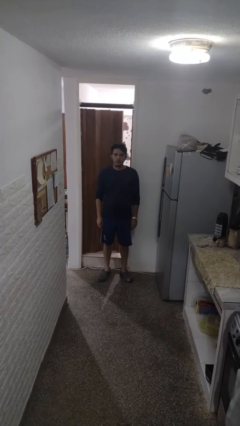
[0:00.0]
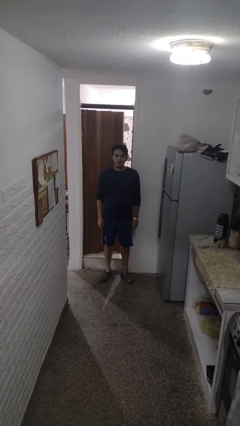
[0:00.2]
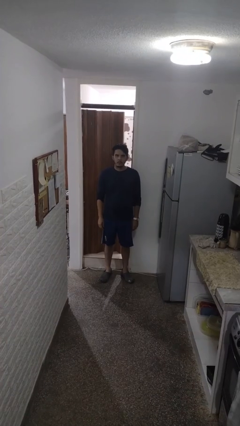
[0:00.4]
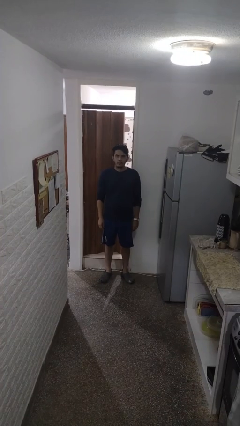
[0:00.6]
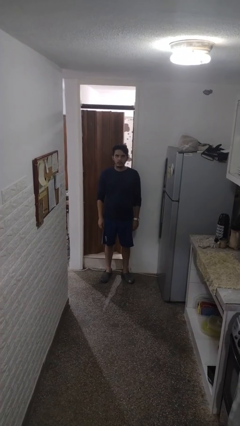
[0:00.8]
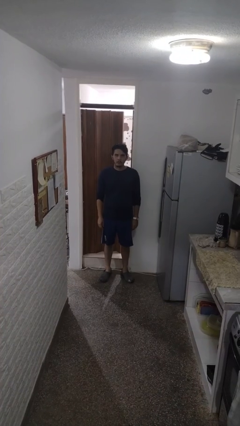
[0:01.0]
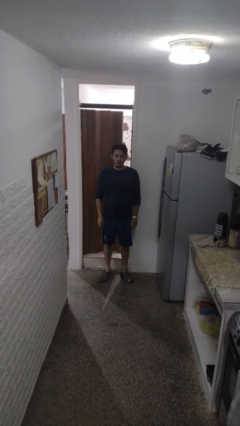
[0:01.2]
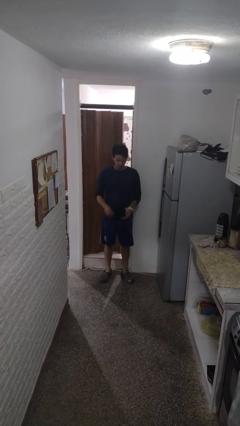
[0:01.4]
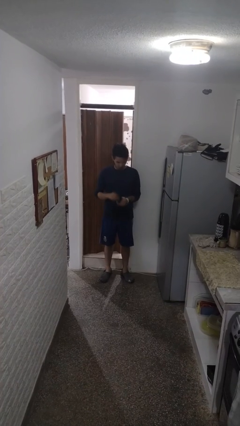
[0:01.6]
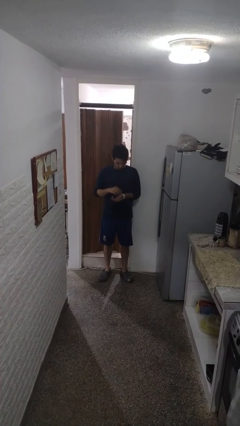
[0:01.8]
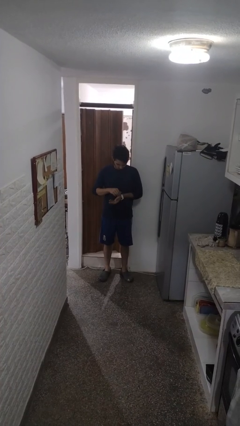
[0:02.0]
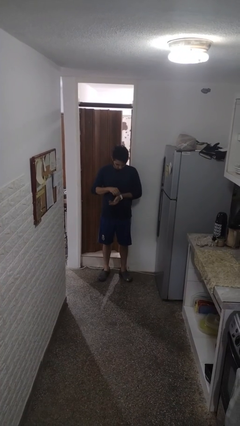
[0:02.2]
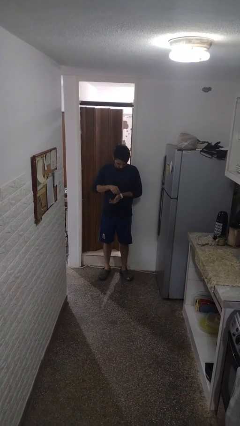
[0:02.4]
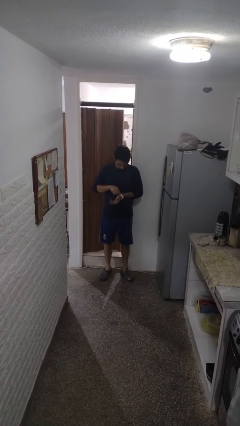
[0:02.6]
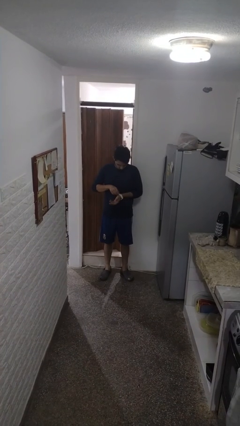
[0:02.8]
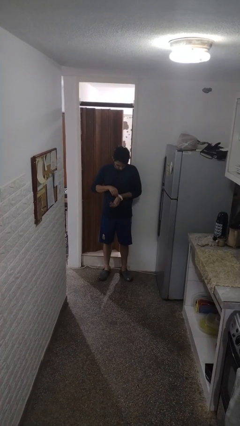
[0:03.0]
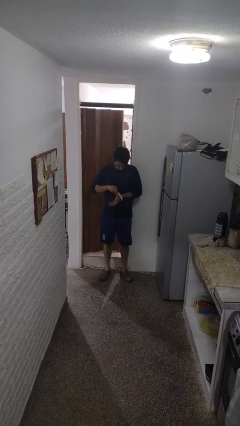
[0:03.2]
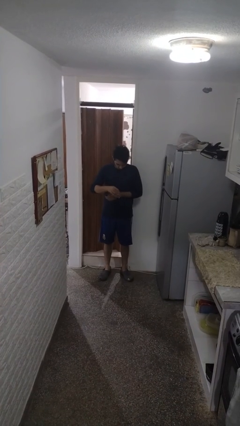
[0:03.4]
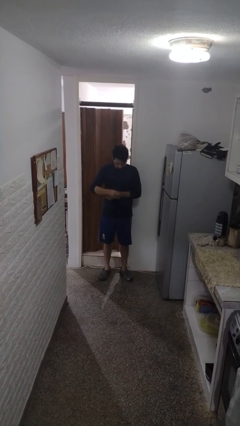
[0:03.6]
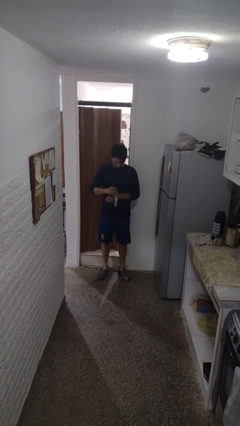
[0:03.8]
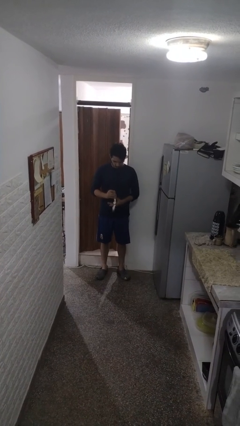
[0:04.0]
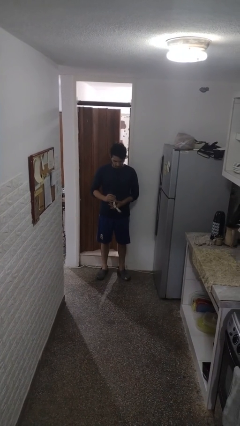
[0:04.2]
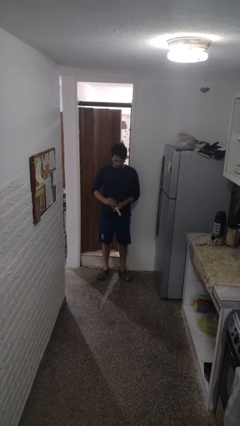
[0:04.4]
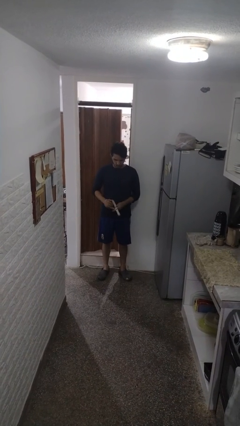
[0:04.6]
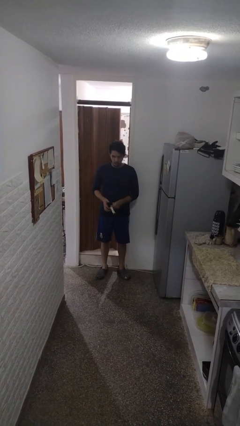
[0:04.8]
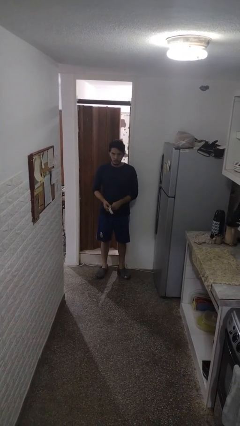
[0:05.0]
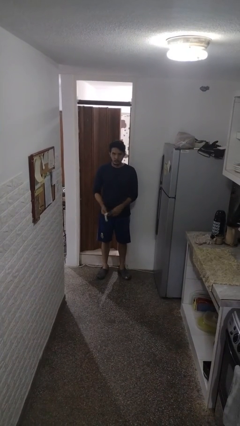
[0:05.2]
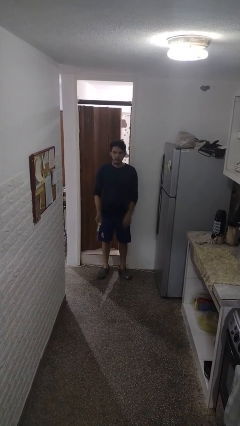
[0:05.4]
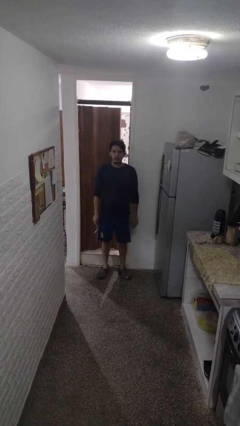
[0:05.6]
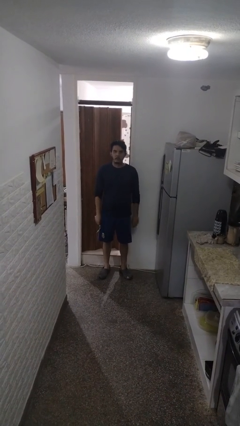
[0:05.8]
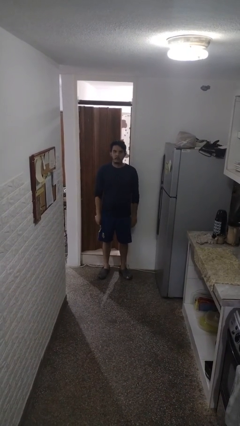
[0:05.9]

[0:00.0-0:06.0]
person takes off wristwatch

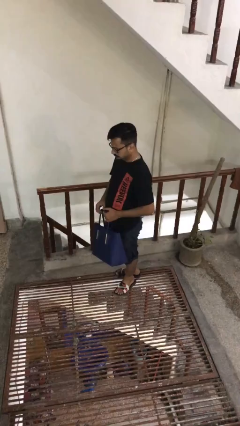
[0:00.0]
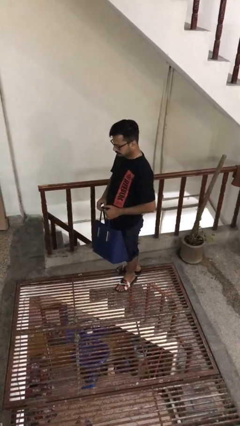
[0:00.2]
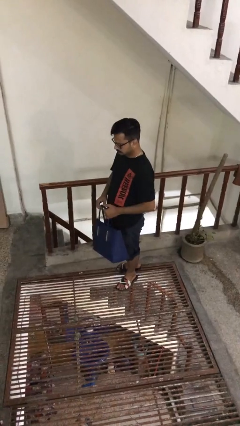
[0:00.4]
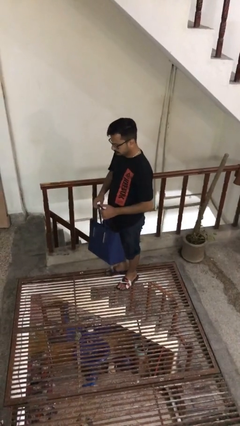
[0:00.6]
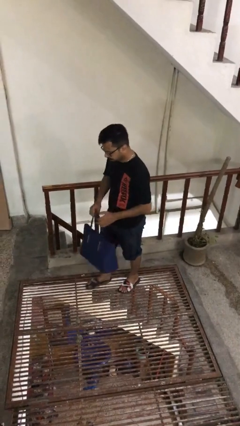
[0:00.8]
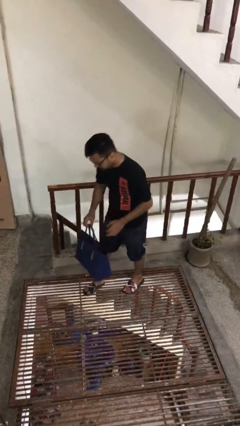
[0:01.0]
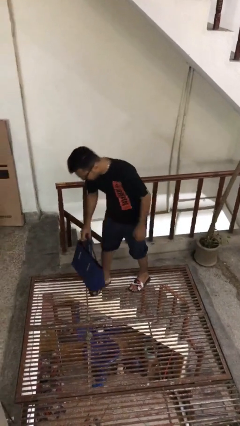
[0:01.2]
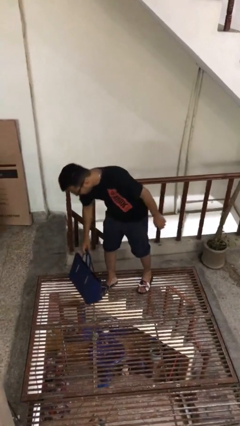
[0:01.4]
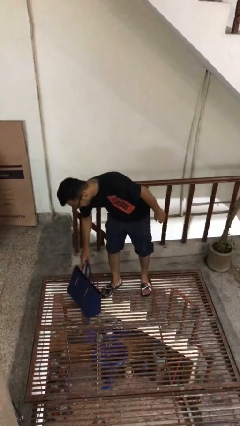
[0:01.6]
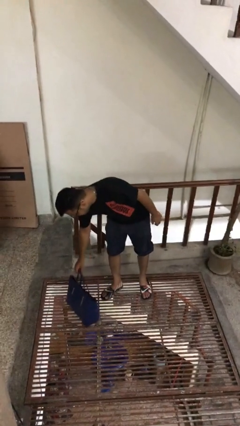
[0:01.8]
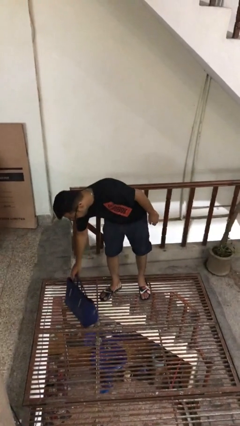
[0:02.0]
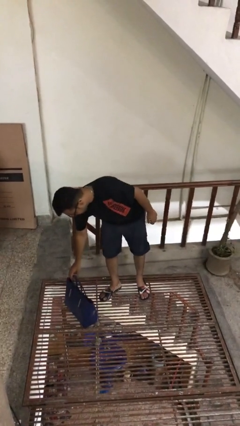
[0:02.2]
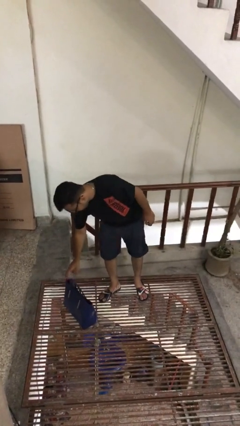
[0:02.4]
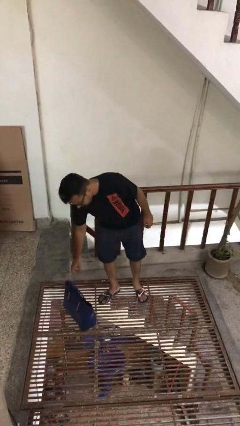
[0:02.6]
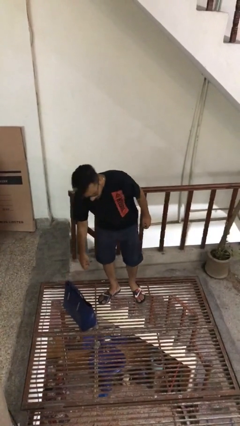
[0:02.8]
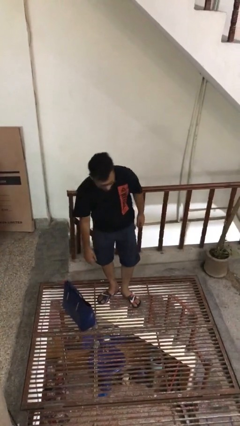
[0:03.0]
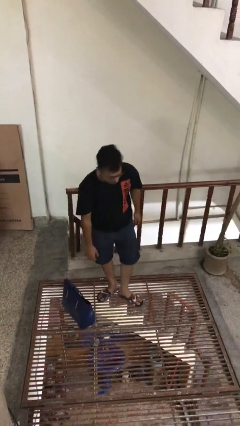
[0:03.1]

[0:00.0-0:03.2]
person puts down object on floor

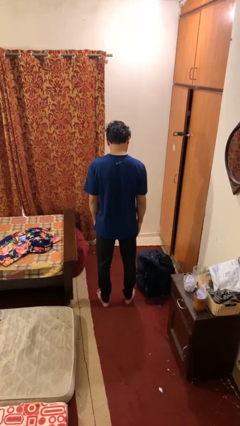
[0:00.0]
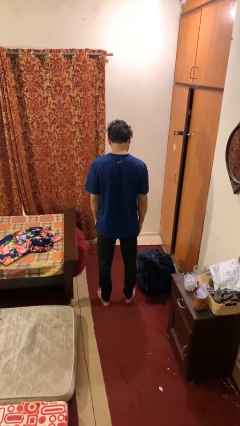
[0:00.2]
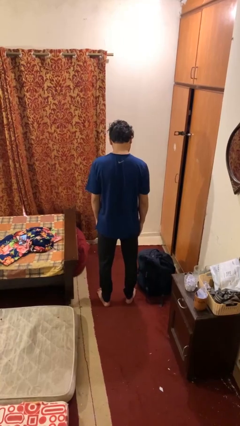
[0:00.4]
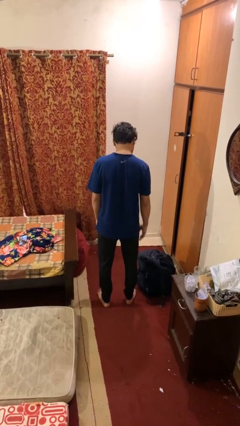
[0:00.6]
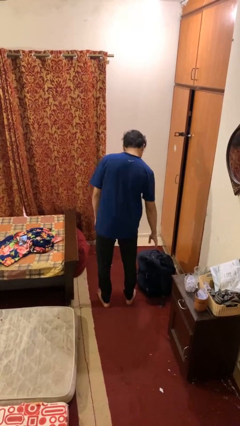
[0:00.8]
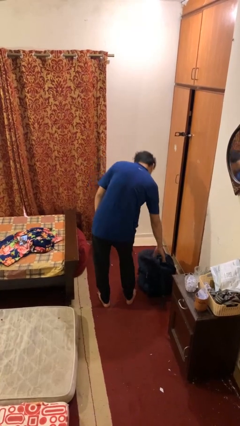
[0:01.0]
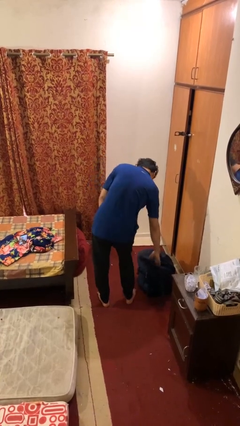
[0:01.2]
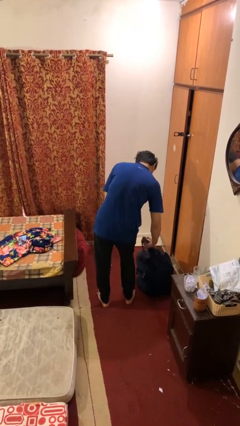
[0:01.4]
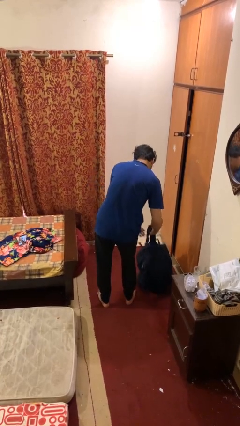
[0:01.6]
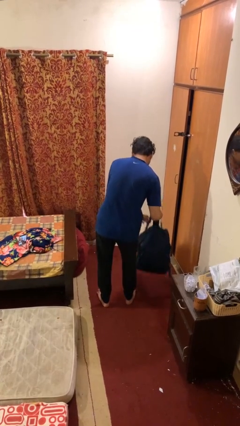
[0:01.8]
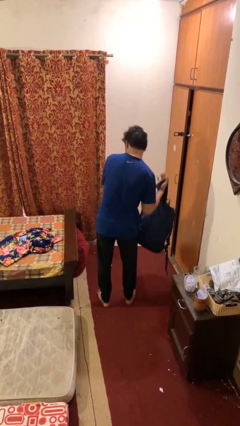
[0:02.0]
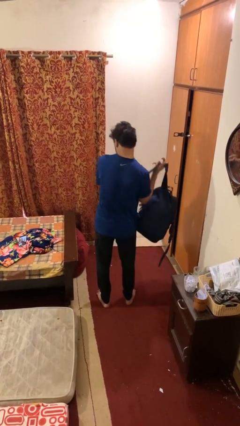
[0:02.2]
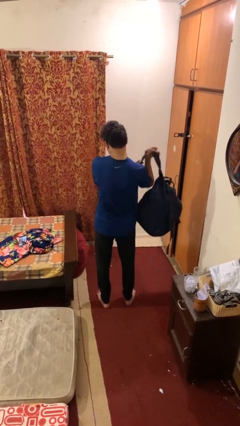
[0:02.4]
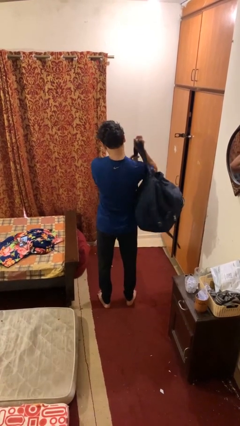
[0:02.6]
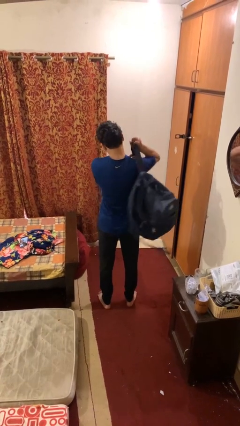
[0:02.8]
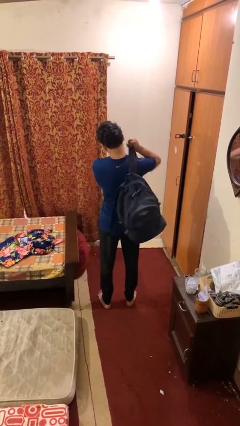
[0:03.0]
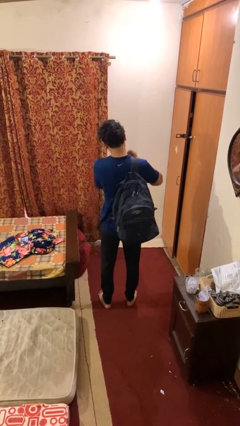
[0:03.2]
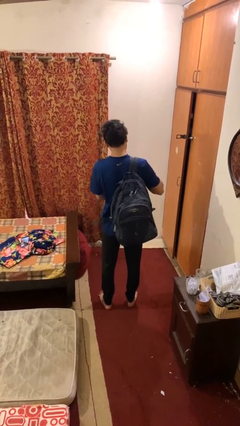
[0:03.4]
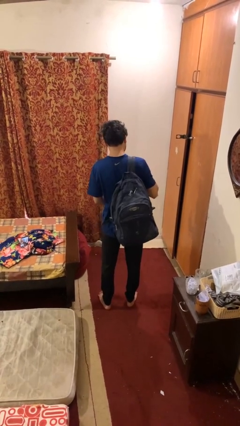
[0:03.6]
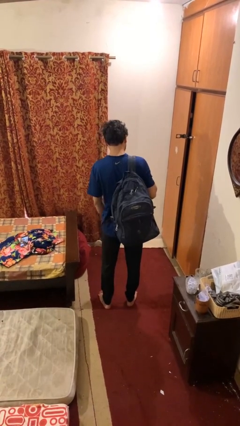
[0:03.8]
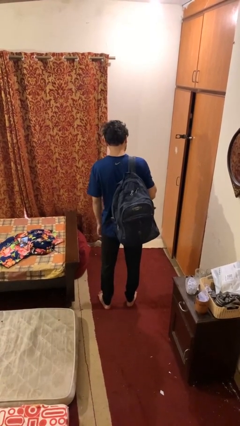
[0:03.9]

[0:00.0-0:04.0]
person puts on backpack

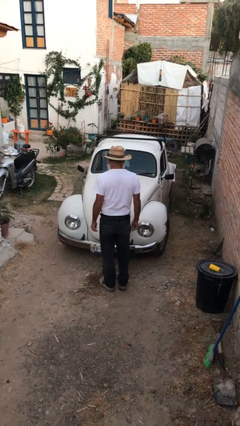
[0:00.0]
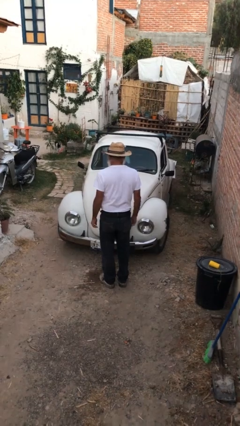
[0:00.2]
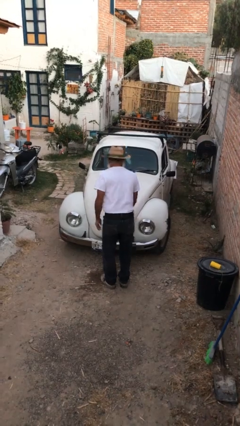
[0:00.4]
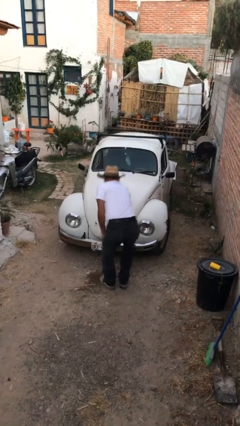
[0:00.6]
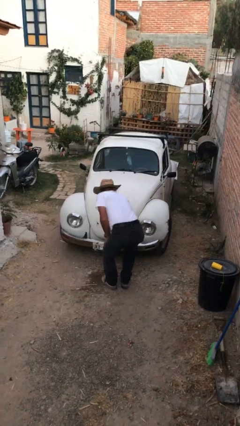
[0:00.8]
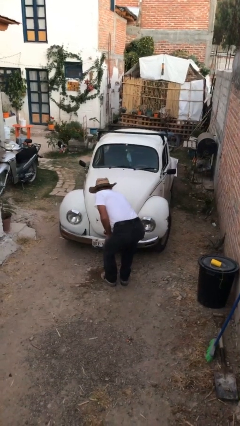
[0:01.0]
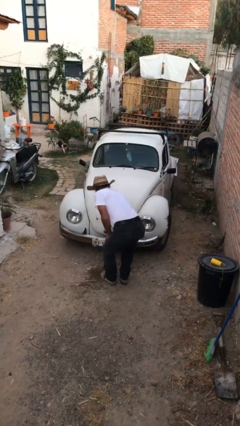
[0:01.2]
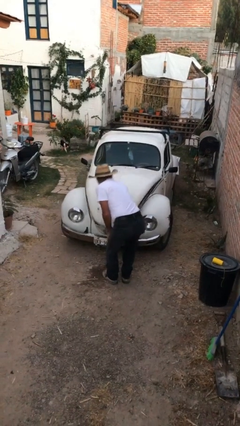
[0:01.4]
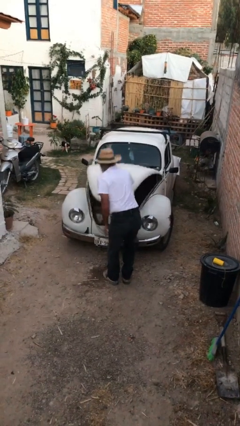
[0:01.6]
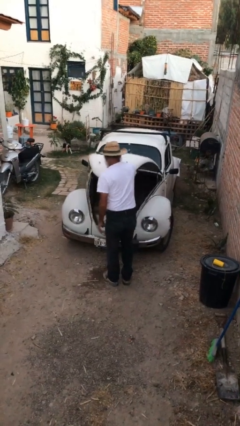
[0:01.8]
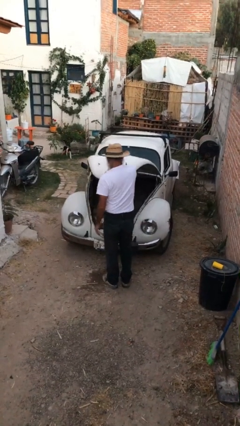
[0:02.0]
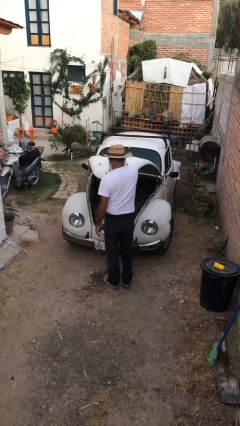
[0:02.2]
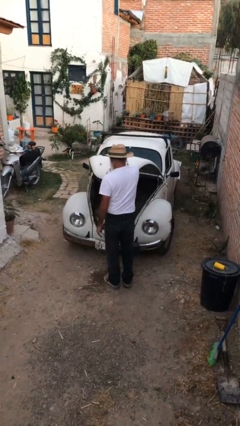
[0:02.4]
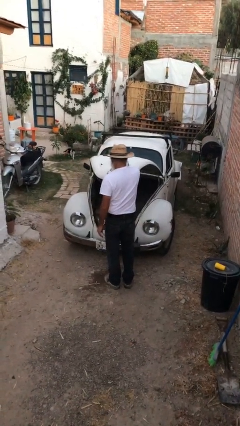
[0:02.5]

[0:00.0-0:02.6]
person opens car trunk

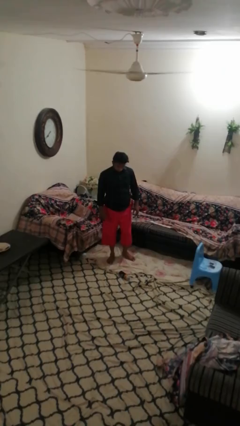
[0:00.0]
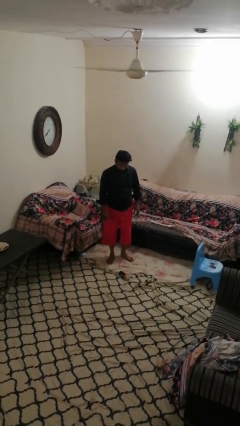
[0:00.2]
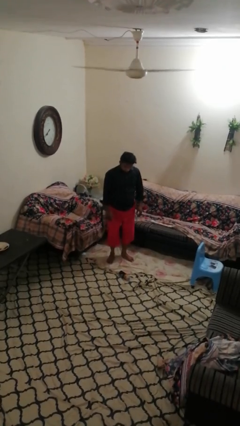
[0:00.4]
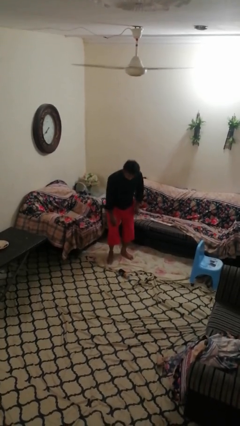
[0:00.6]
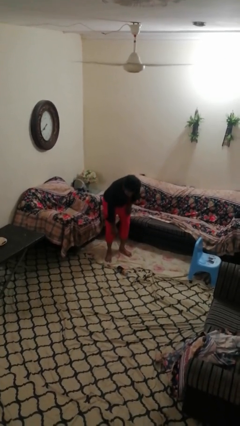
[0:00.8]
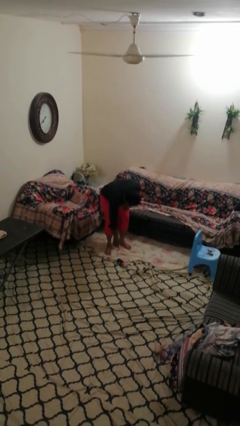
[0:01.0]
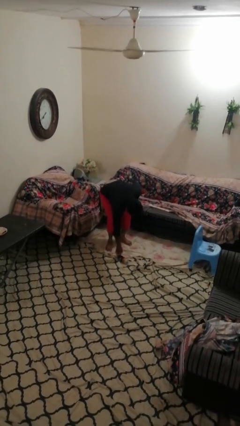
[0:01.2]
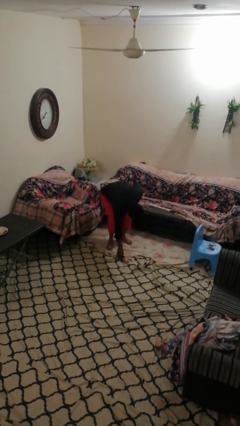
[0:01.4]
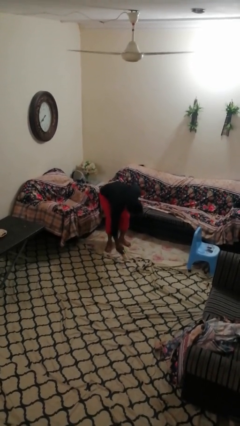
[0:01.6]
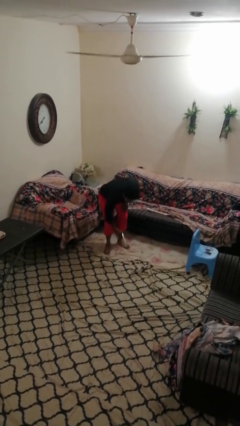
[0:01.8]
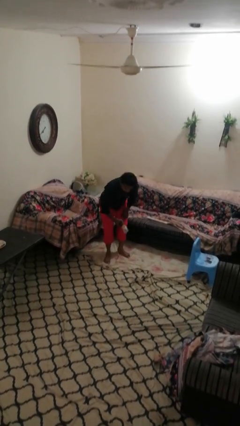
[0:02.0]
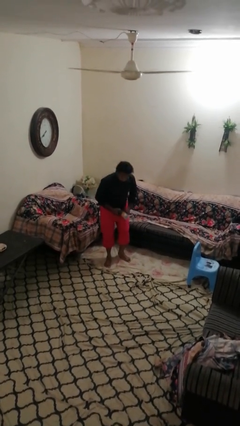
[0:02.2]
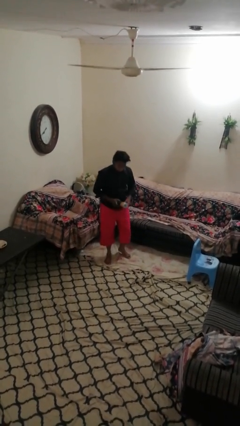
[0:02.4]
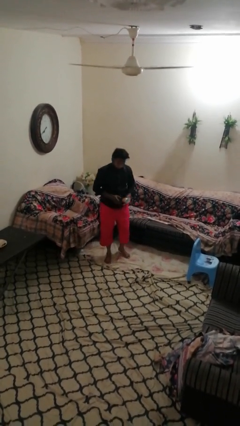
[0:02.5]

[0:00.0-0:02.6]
person picks up object from floor
